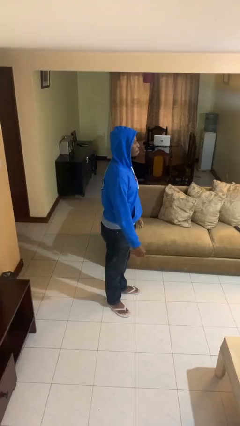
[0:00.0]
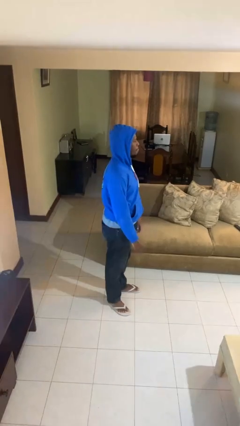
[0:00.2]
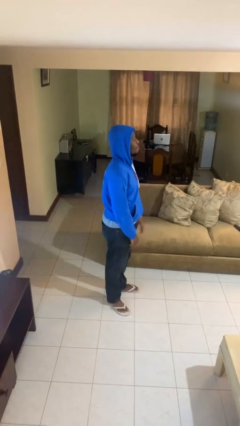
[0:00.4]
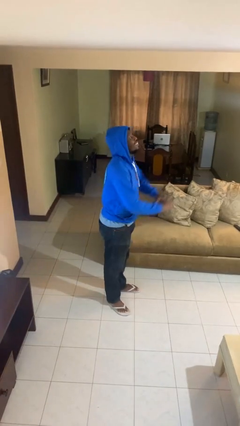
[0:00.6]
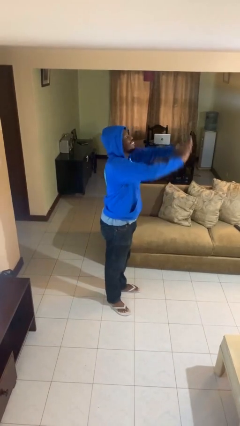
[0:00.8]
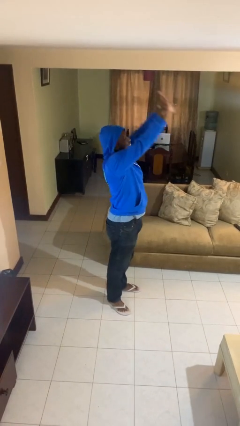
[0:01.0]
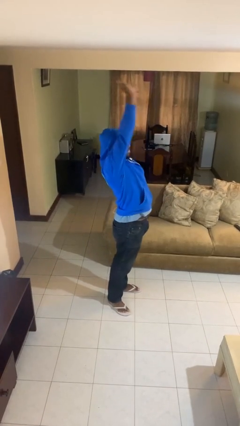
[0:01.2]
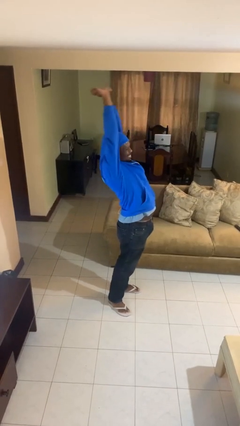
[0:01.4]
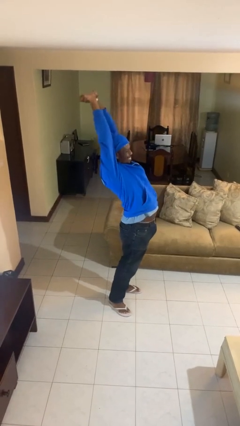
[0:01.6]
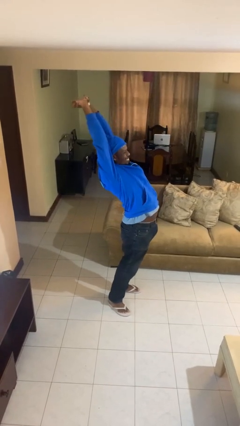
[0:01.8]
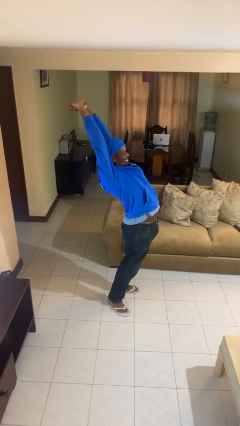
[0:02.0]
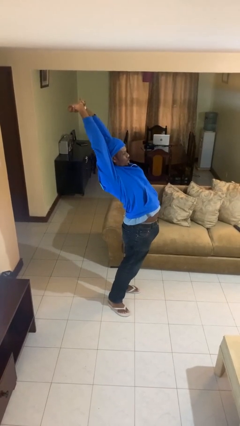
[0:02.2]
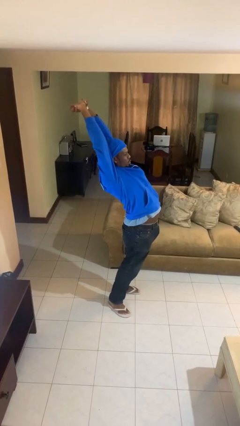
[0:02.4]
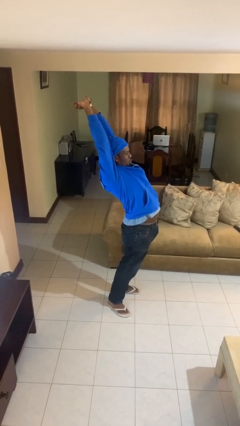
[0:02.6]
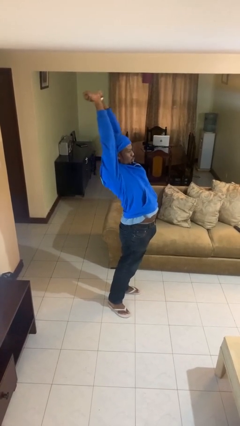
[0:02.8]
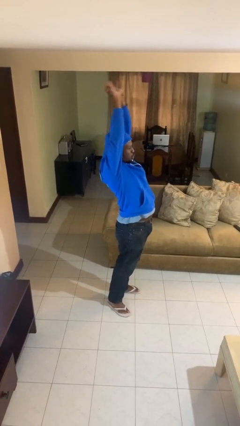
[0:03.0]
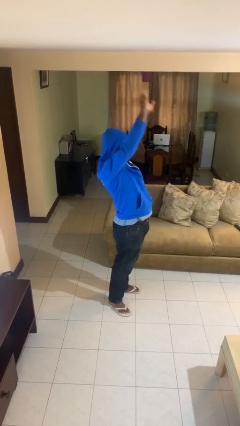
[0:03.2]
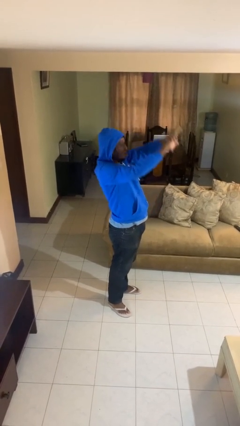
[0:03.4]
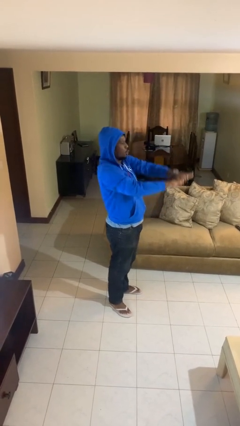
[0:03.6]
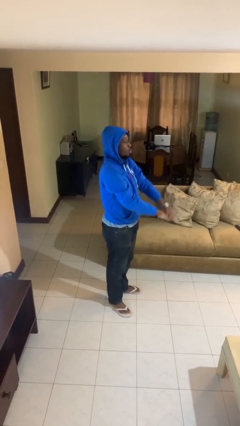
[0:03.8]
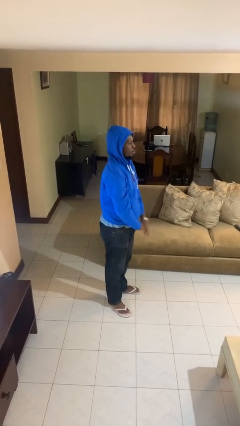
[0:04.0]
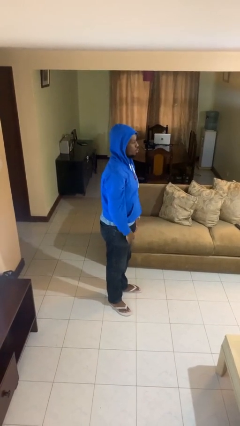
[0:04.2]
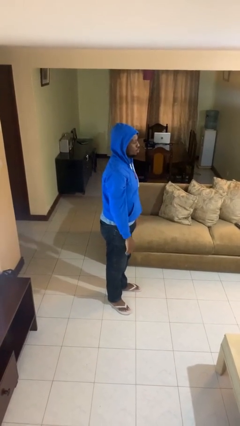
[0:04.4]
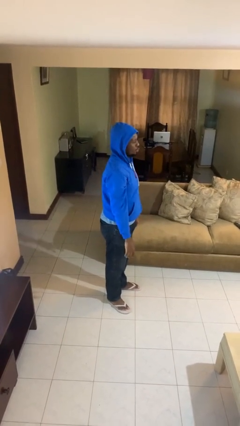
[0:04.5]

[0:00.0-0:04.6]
person stretches arms over head

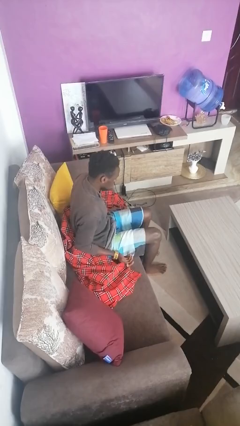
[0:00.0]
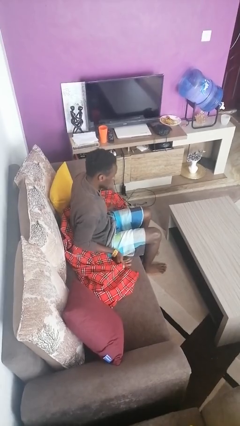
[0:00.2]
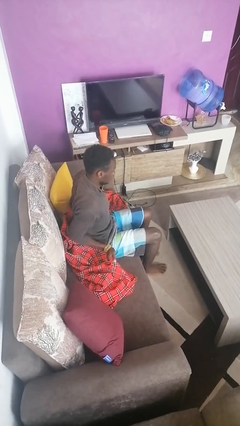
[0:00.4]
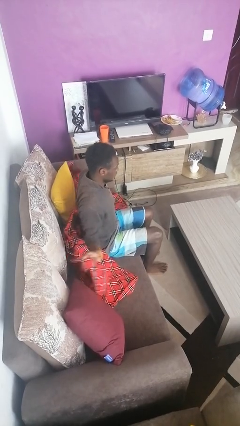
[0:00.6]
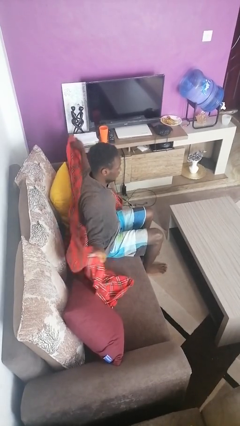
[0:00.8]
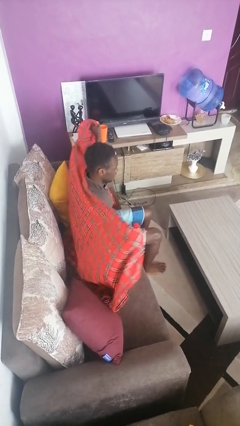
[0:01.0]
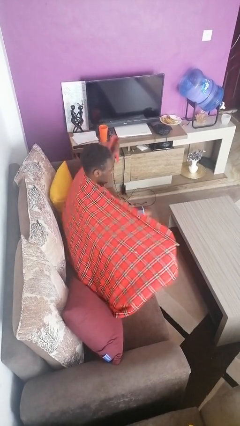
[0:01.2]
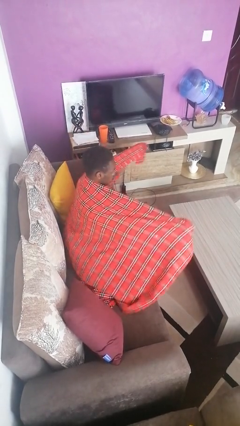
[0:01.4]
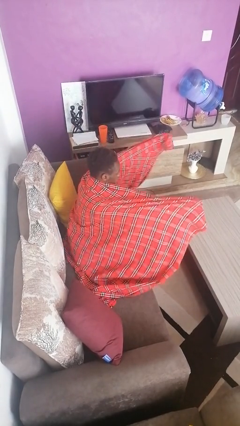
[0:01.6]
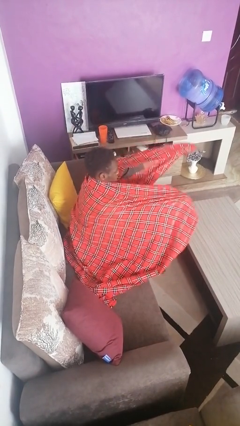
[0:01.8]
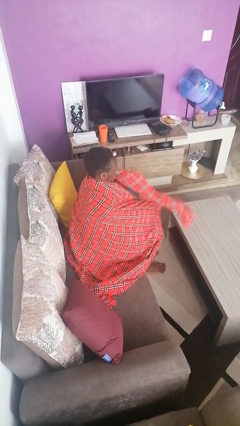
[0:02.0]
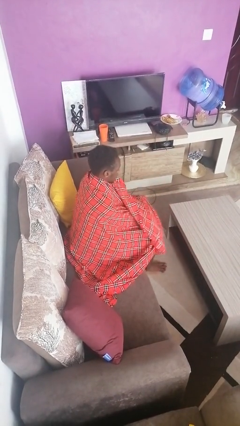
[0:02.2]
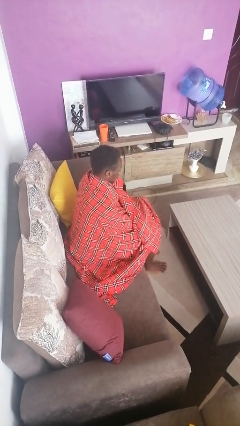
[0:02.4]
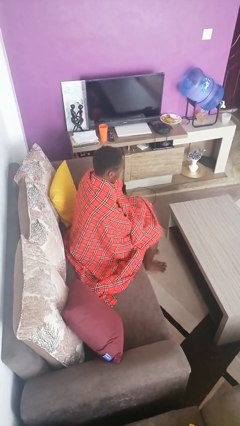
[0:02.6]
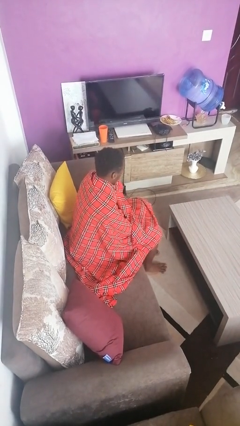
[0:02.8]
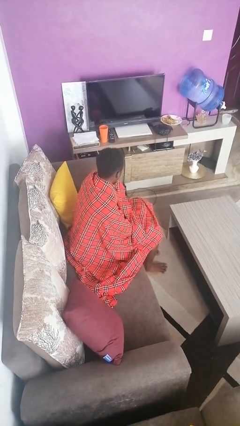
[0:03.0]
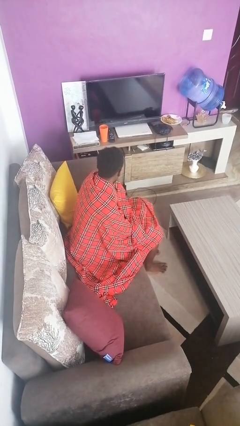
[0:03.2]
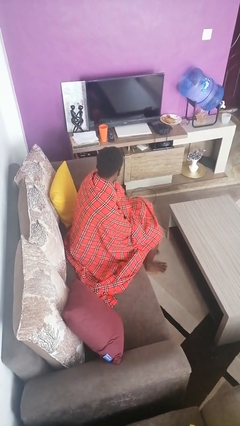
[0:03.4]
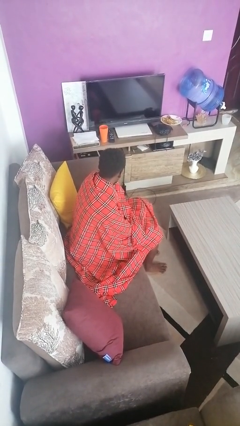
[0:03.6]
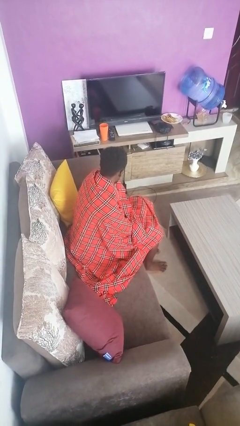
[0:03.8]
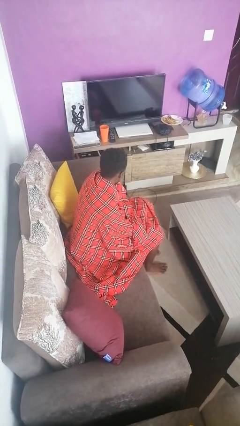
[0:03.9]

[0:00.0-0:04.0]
person covers with blanket

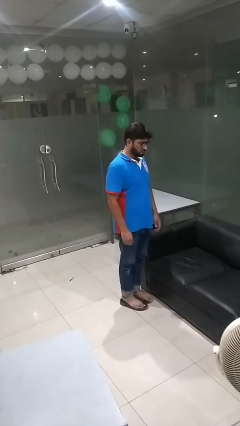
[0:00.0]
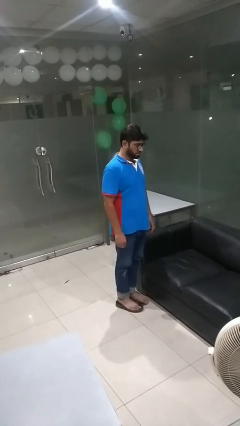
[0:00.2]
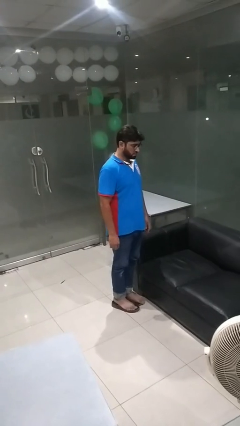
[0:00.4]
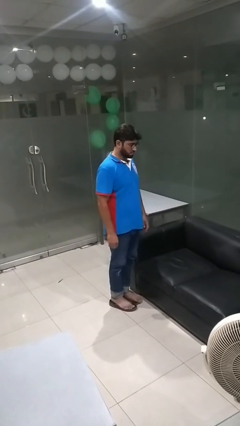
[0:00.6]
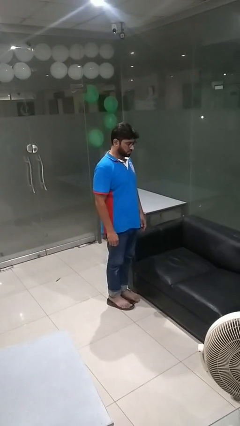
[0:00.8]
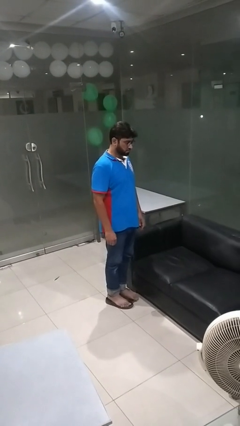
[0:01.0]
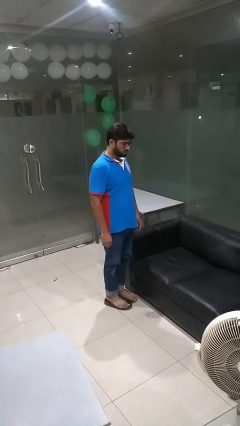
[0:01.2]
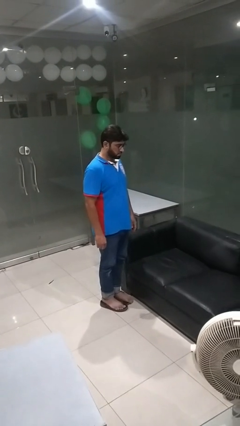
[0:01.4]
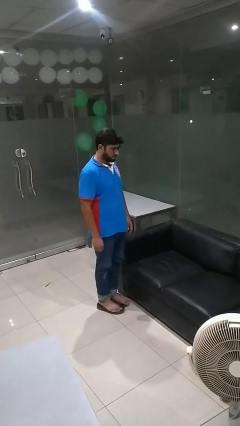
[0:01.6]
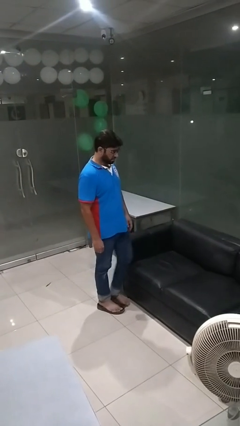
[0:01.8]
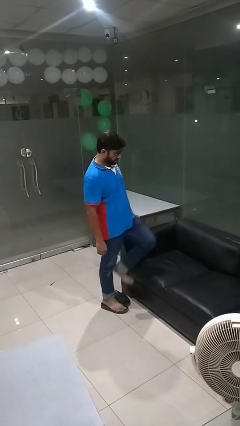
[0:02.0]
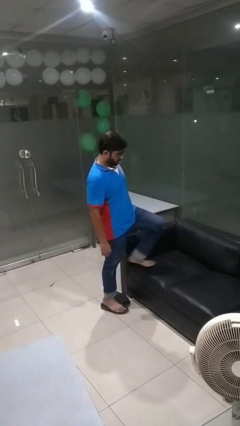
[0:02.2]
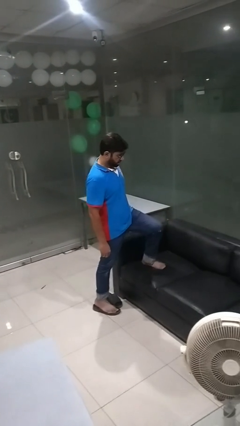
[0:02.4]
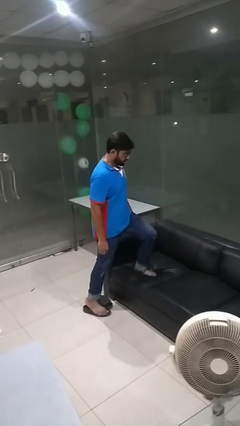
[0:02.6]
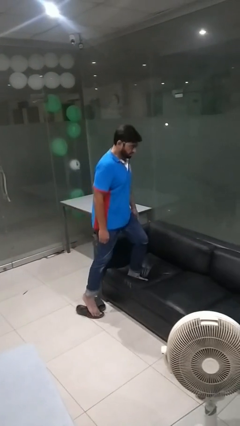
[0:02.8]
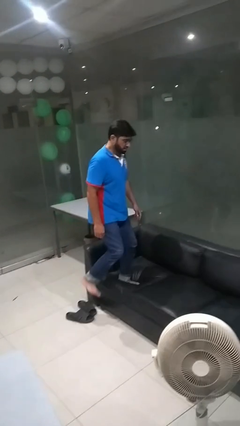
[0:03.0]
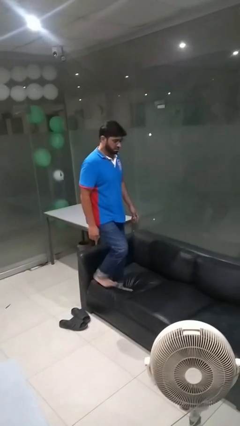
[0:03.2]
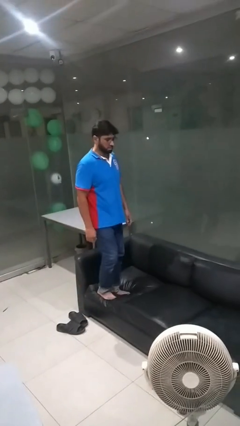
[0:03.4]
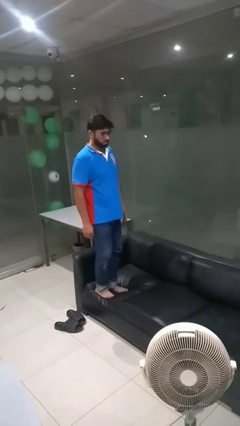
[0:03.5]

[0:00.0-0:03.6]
person climbs on couch

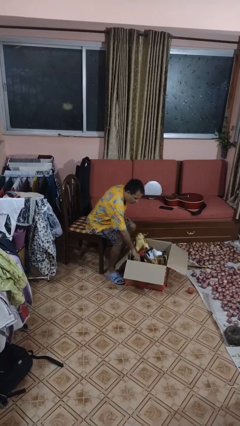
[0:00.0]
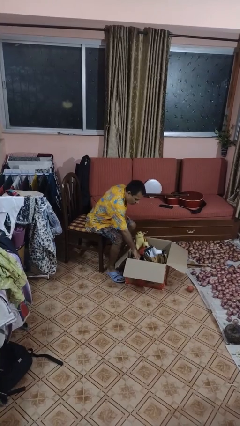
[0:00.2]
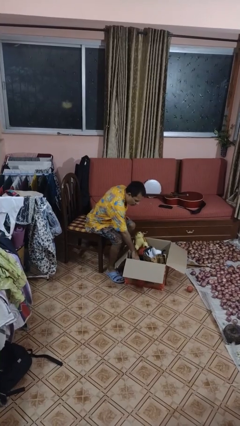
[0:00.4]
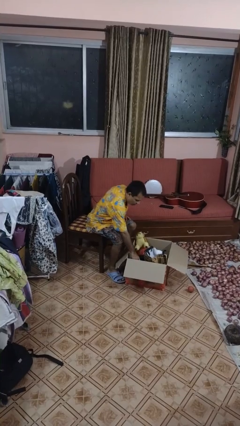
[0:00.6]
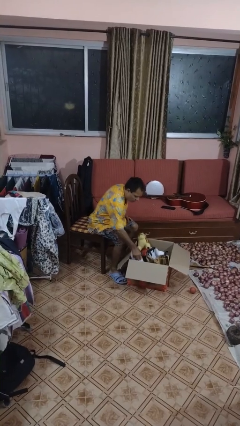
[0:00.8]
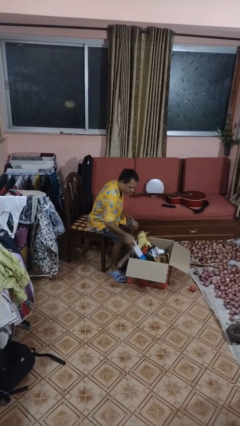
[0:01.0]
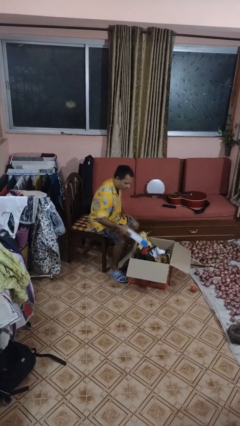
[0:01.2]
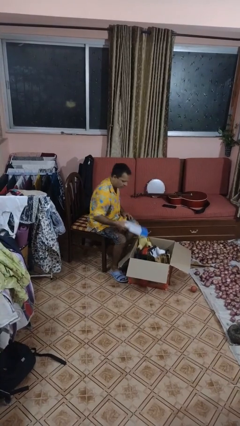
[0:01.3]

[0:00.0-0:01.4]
person takes object from box

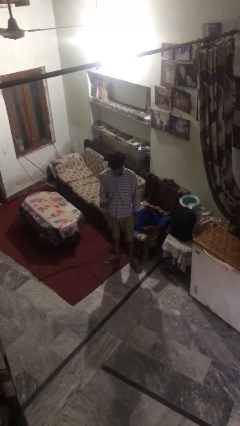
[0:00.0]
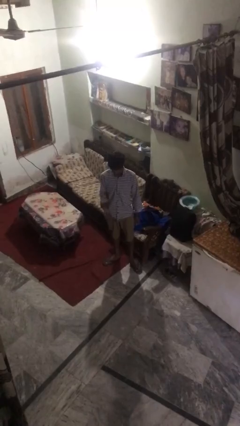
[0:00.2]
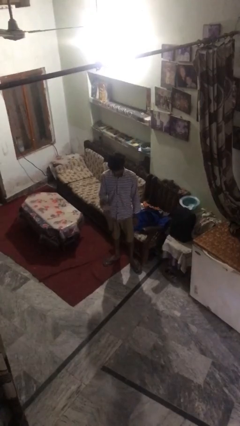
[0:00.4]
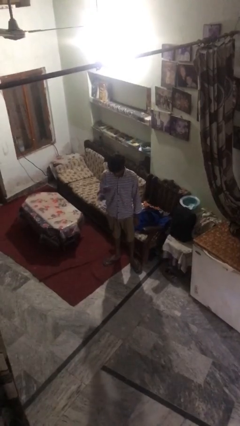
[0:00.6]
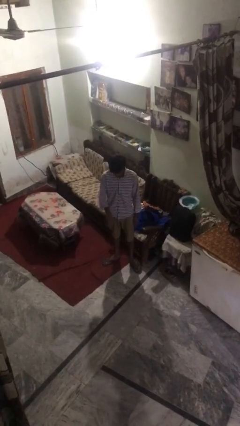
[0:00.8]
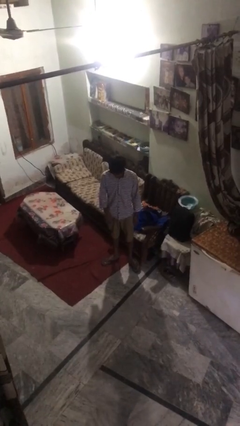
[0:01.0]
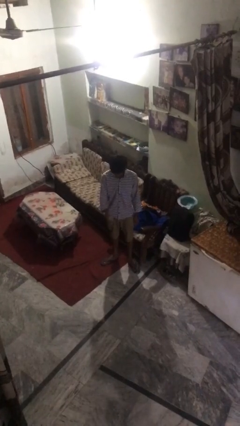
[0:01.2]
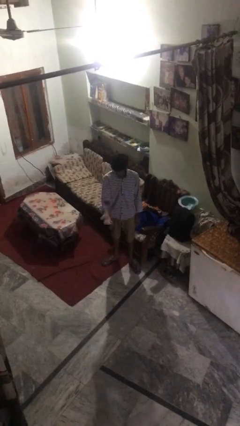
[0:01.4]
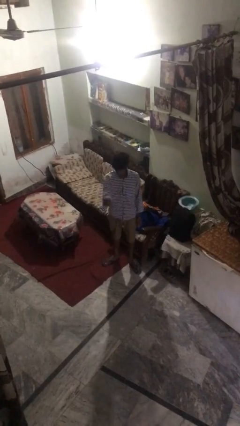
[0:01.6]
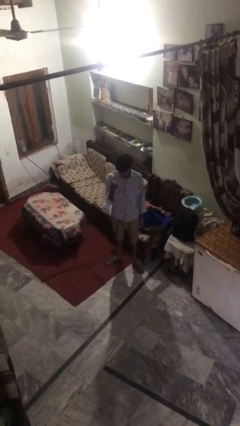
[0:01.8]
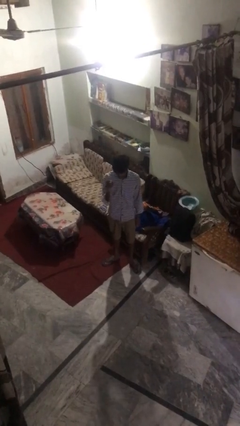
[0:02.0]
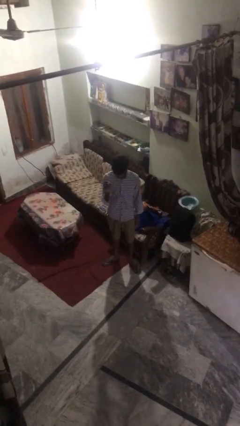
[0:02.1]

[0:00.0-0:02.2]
person bounces ball on floor

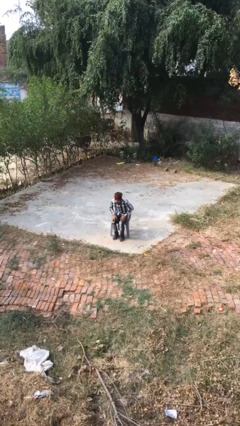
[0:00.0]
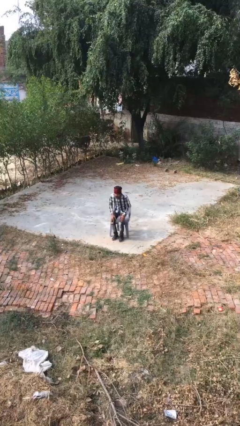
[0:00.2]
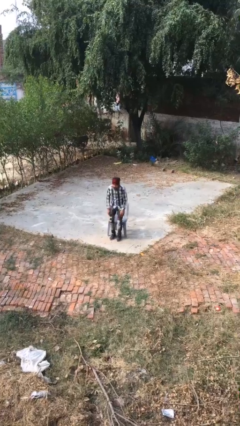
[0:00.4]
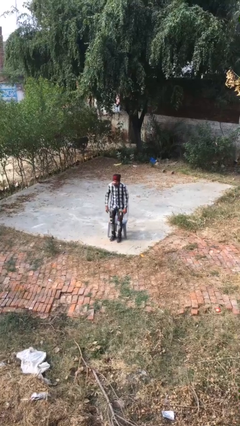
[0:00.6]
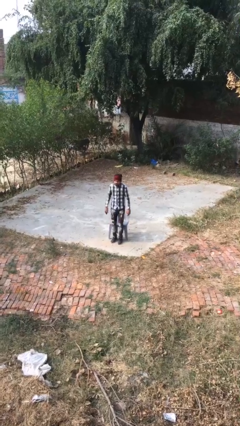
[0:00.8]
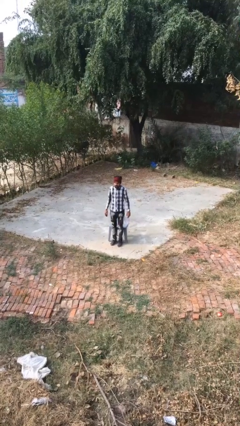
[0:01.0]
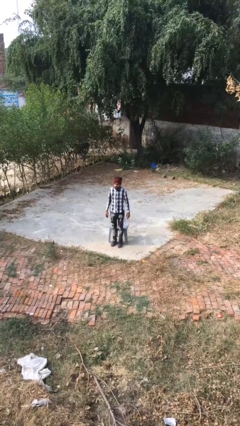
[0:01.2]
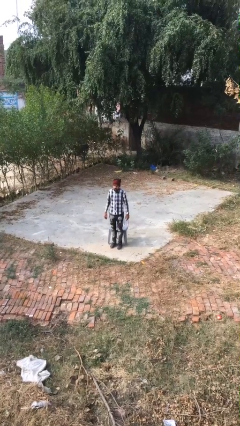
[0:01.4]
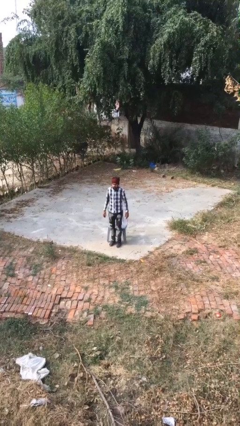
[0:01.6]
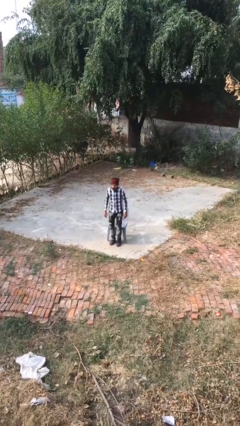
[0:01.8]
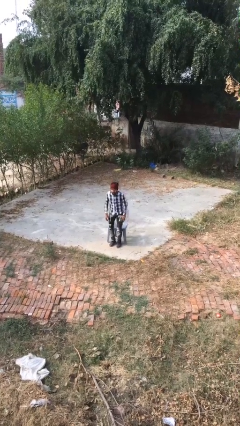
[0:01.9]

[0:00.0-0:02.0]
person stands up
